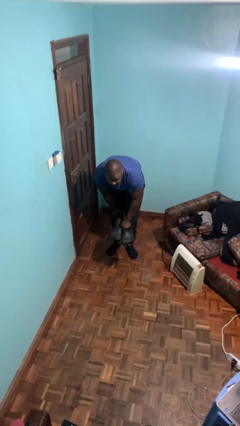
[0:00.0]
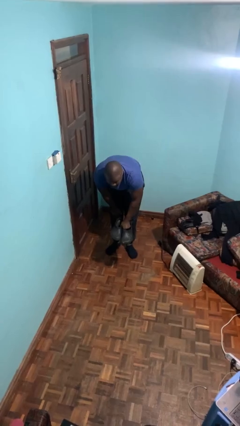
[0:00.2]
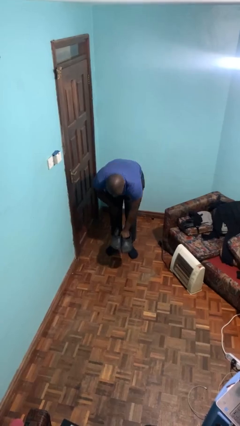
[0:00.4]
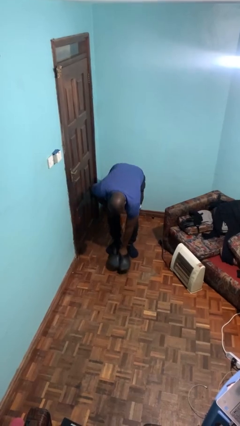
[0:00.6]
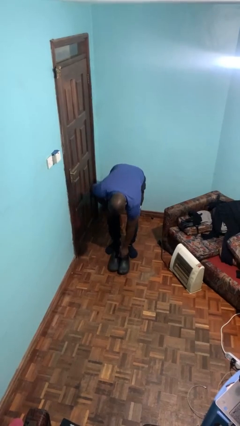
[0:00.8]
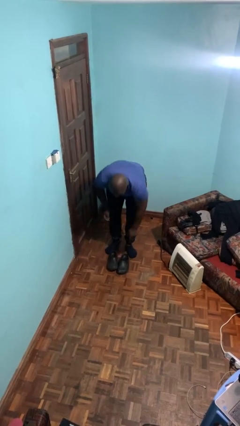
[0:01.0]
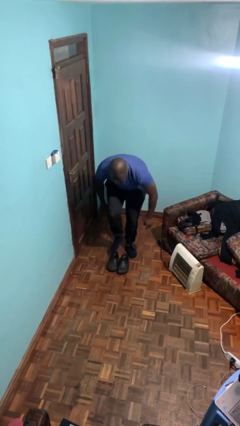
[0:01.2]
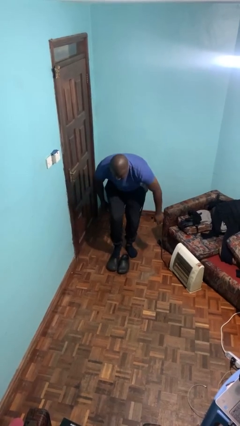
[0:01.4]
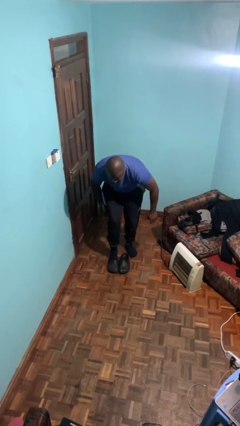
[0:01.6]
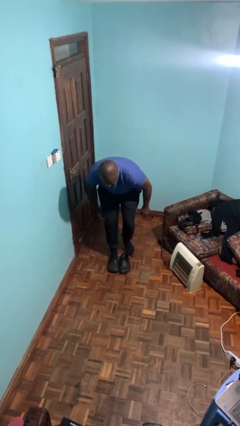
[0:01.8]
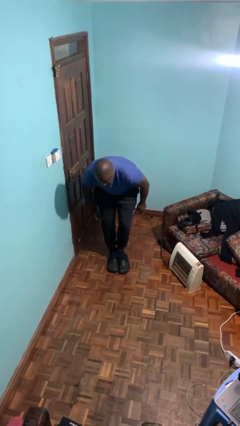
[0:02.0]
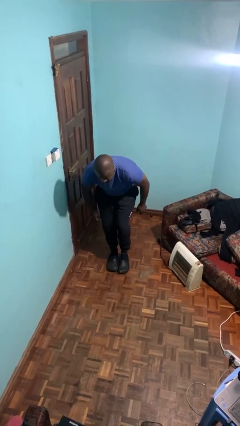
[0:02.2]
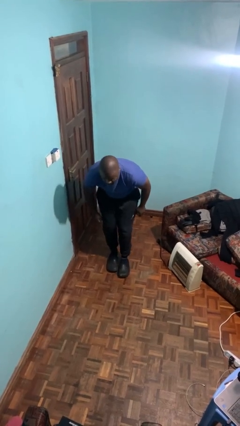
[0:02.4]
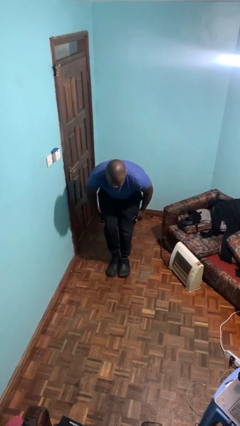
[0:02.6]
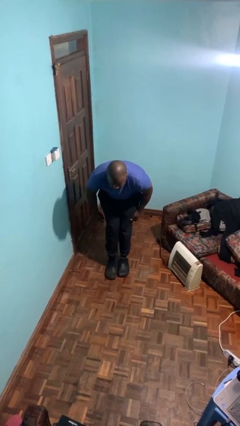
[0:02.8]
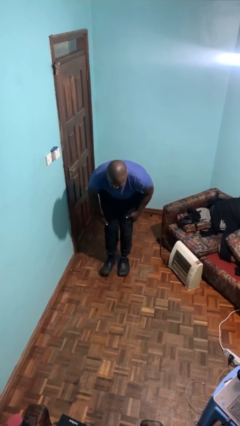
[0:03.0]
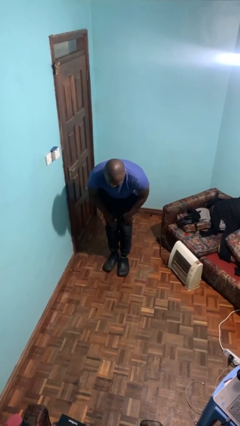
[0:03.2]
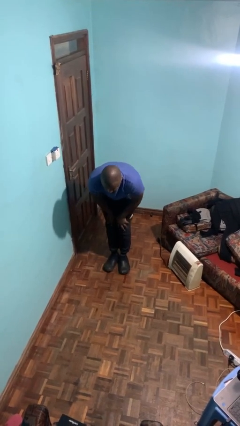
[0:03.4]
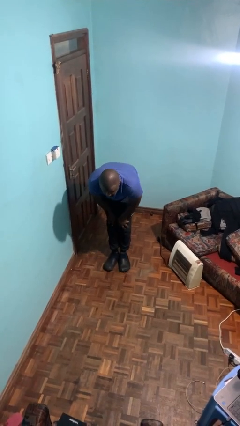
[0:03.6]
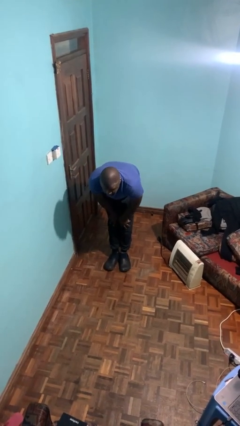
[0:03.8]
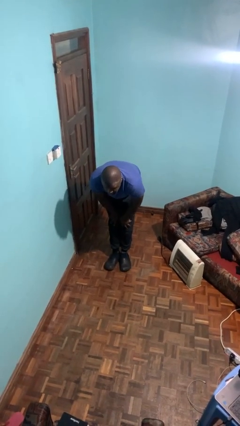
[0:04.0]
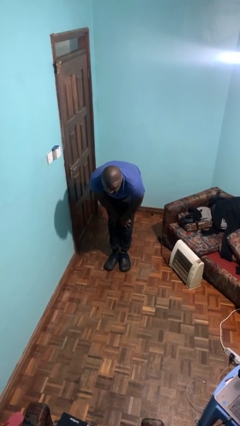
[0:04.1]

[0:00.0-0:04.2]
person puts on shoes

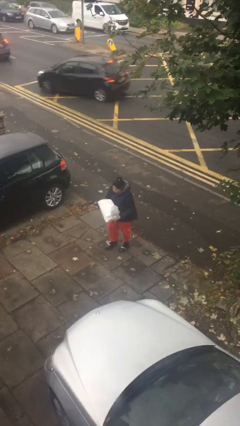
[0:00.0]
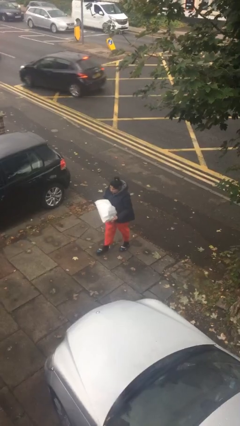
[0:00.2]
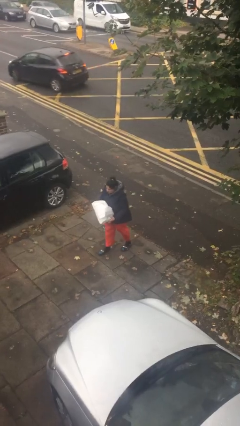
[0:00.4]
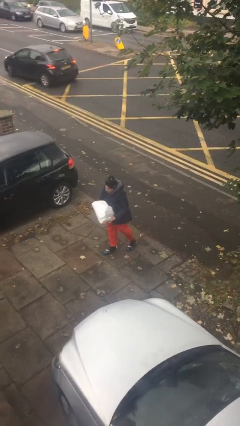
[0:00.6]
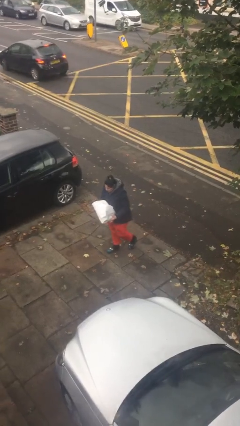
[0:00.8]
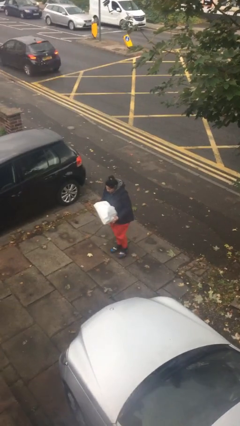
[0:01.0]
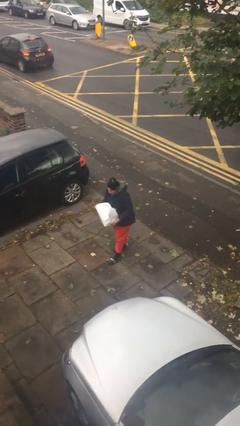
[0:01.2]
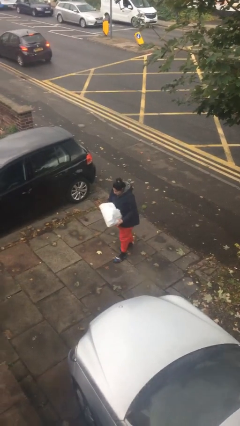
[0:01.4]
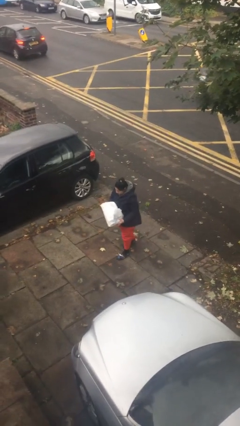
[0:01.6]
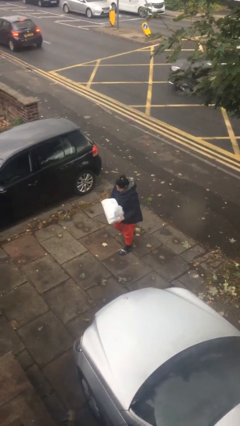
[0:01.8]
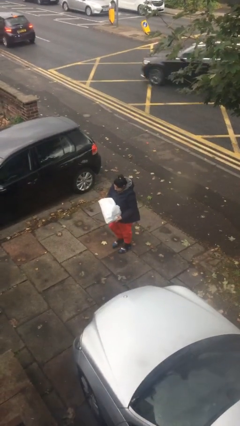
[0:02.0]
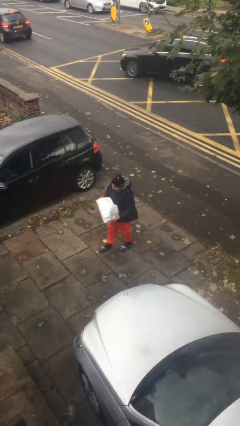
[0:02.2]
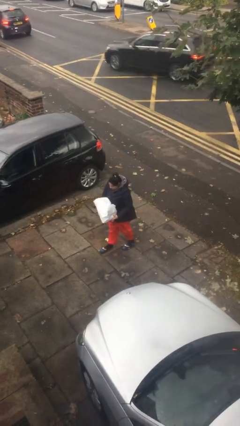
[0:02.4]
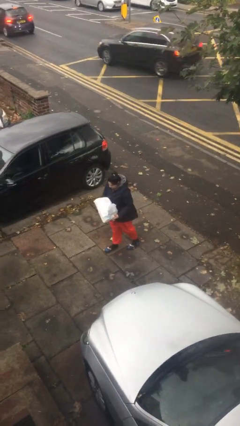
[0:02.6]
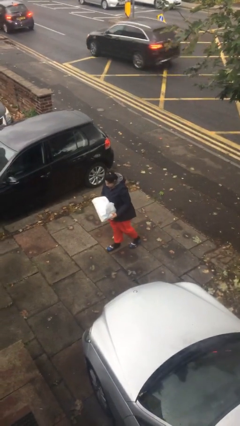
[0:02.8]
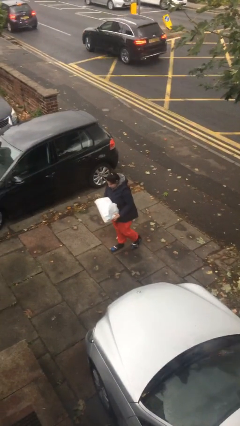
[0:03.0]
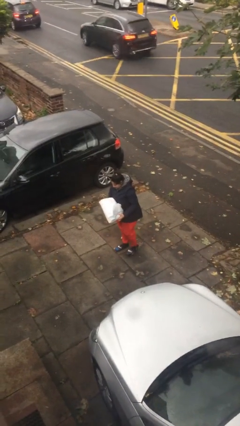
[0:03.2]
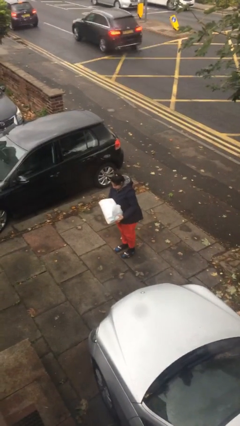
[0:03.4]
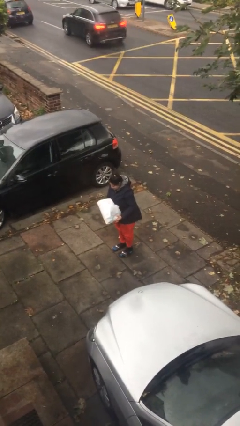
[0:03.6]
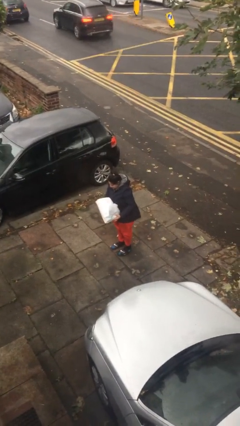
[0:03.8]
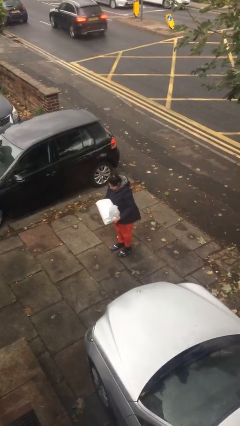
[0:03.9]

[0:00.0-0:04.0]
person carries heavy object

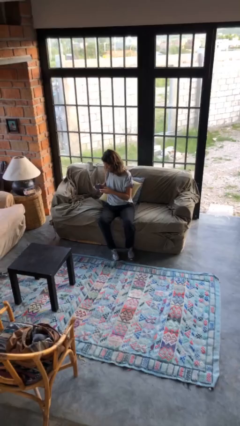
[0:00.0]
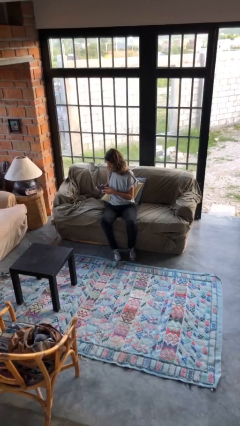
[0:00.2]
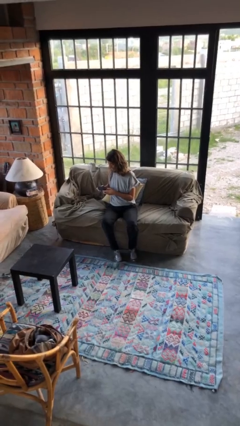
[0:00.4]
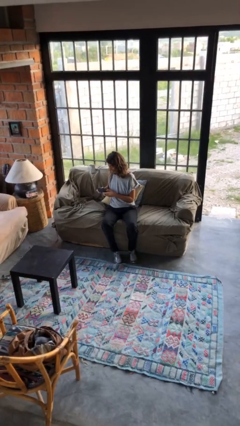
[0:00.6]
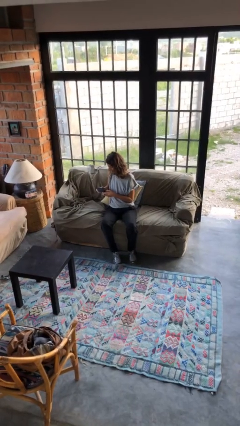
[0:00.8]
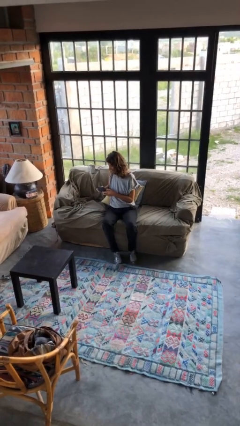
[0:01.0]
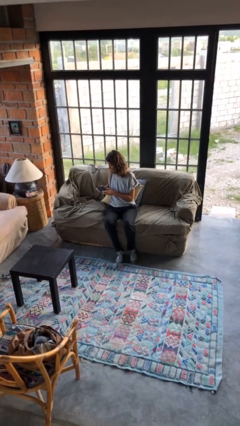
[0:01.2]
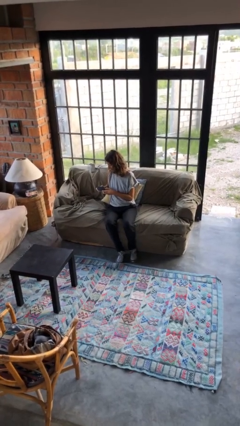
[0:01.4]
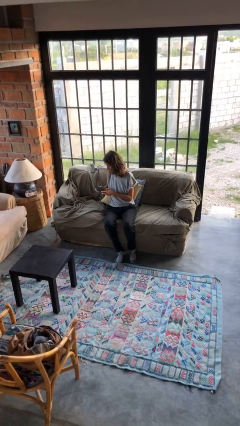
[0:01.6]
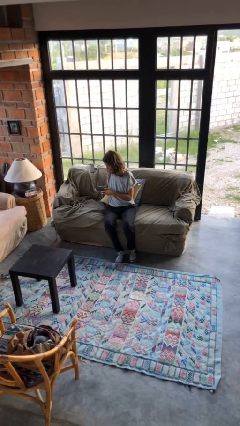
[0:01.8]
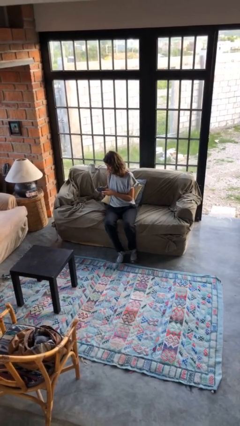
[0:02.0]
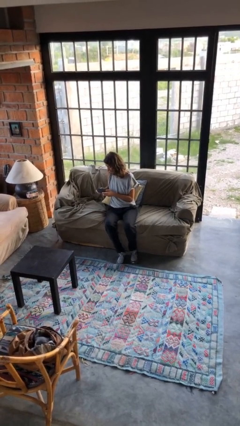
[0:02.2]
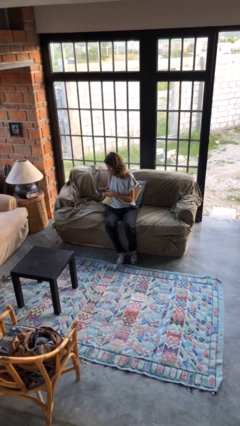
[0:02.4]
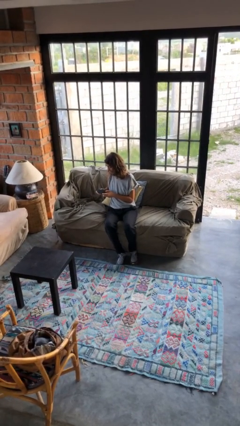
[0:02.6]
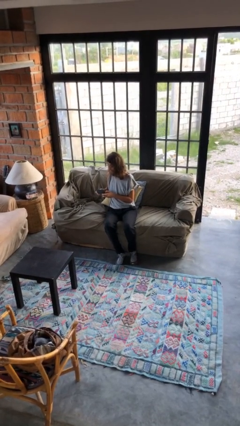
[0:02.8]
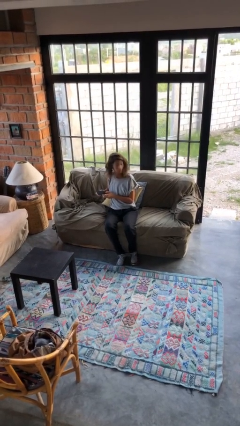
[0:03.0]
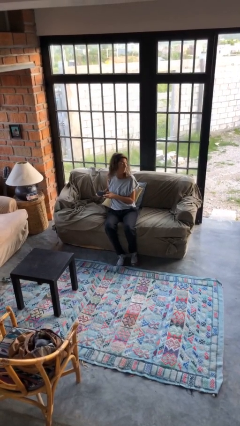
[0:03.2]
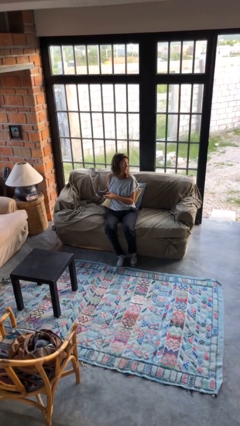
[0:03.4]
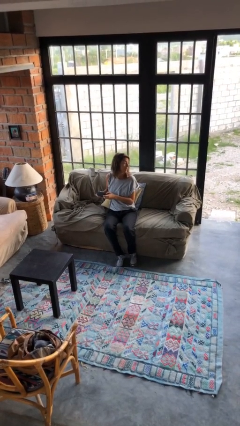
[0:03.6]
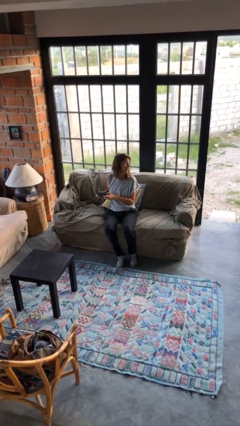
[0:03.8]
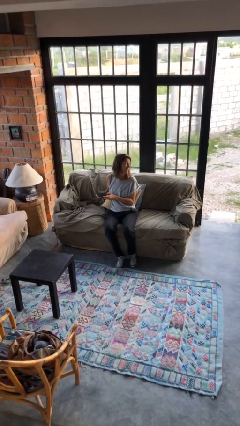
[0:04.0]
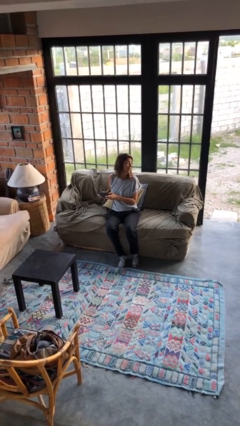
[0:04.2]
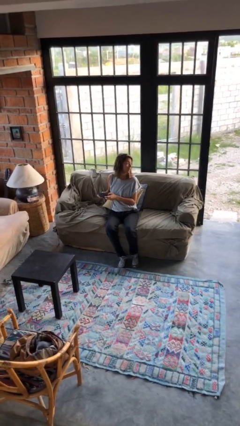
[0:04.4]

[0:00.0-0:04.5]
person interacts with handheld game

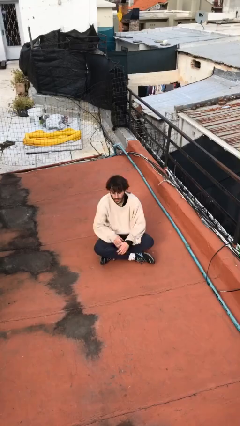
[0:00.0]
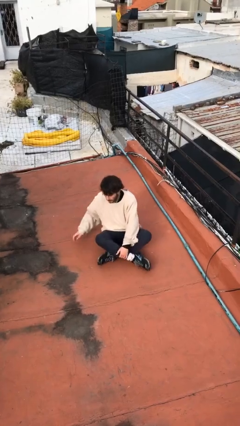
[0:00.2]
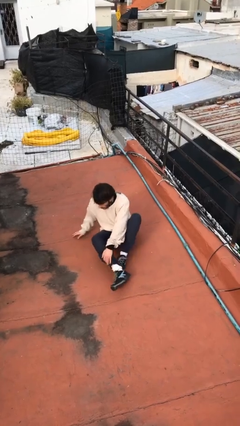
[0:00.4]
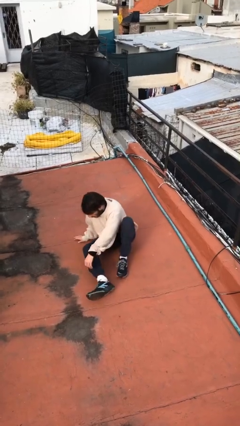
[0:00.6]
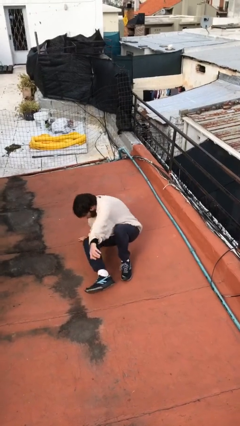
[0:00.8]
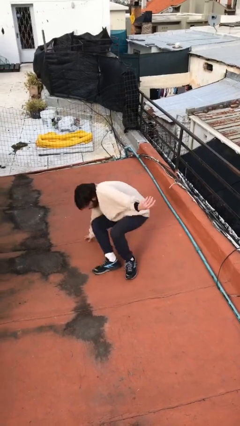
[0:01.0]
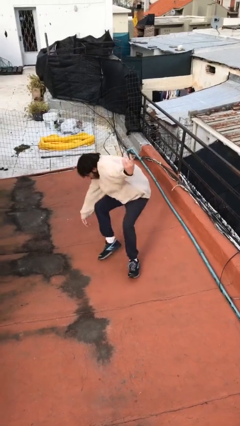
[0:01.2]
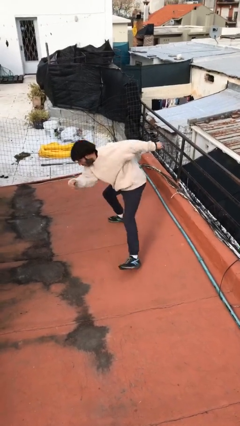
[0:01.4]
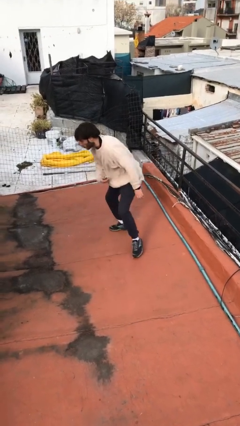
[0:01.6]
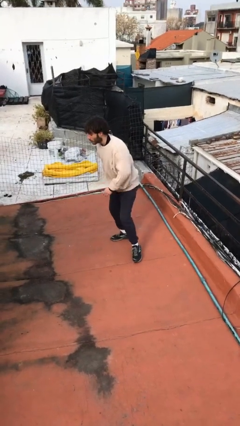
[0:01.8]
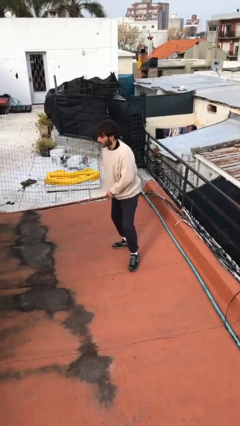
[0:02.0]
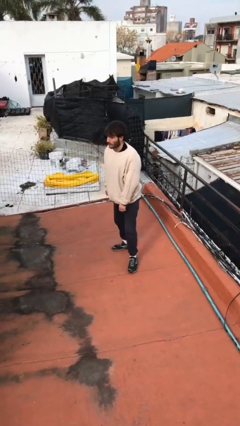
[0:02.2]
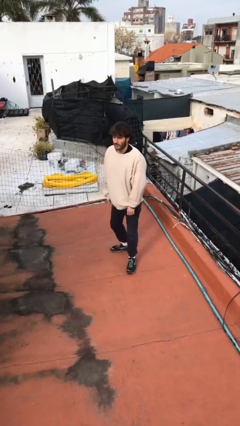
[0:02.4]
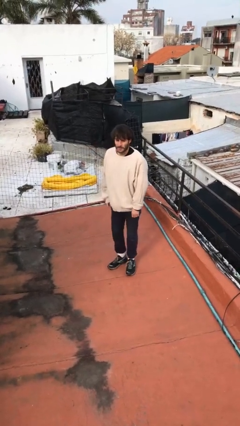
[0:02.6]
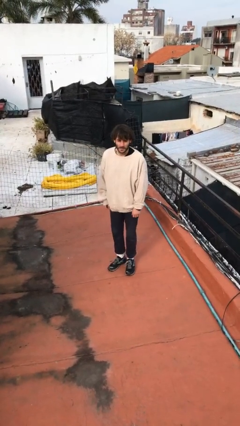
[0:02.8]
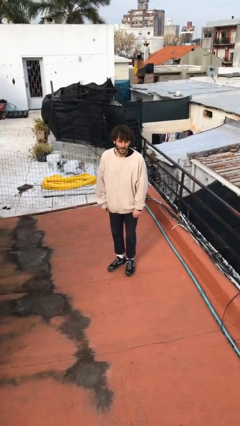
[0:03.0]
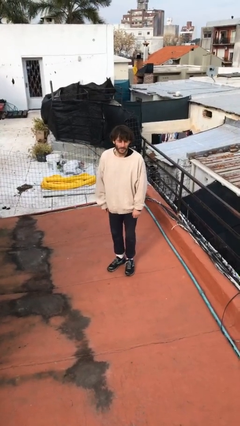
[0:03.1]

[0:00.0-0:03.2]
person stands up from floor

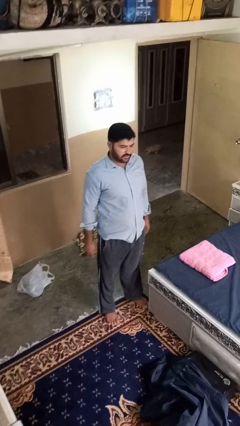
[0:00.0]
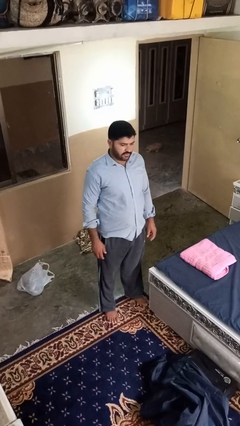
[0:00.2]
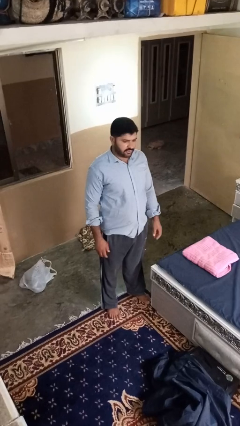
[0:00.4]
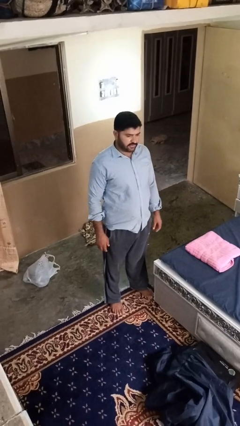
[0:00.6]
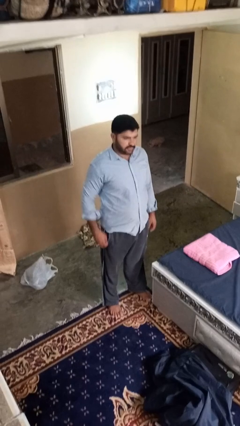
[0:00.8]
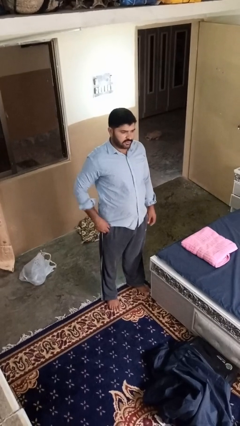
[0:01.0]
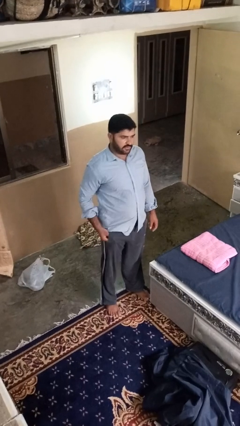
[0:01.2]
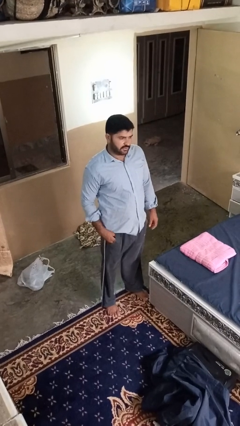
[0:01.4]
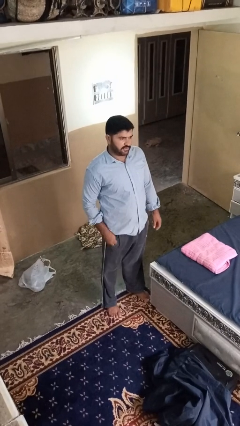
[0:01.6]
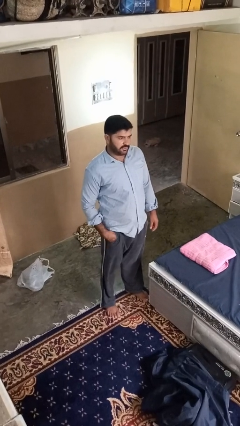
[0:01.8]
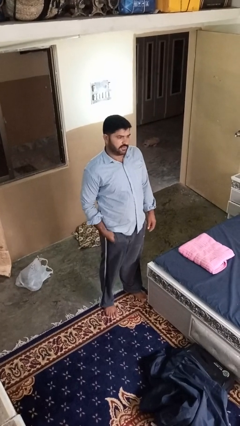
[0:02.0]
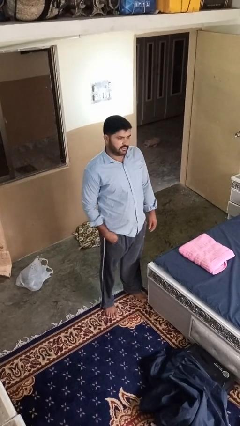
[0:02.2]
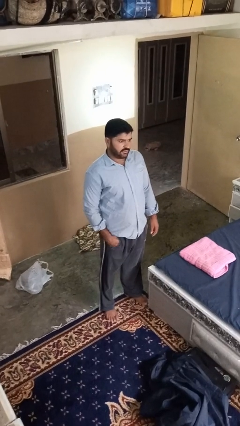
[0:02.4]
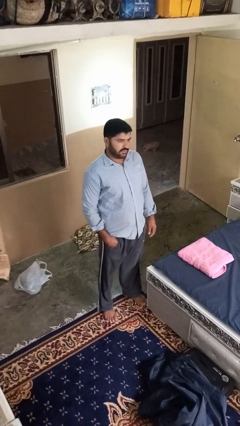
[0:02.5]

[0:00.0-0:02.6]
person puts hands in back pockets
